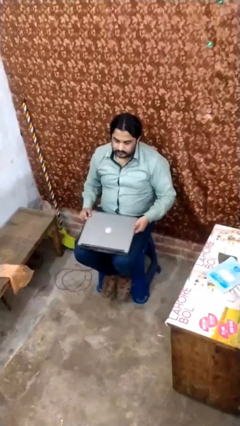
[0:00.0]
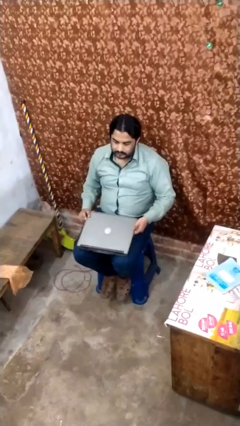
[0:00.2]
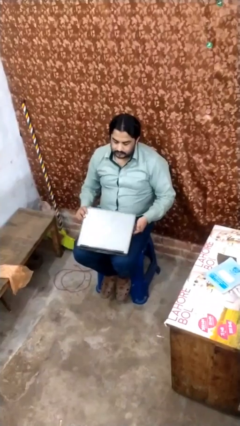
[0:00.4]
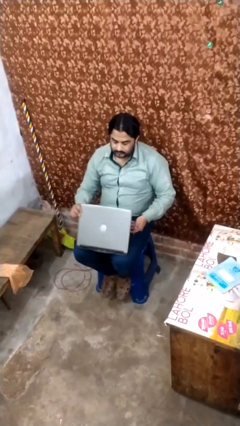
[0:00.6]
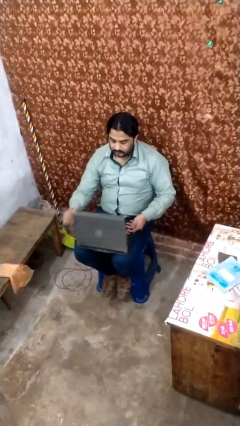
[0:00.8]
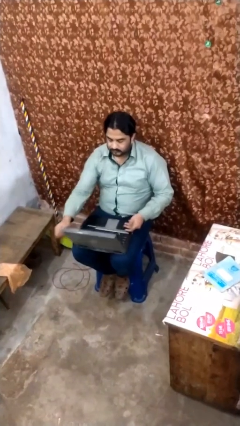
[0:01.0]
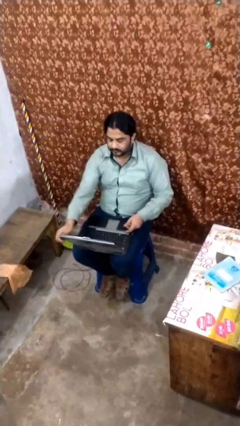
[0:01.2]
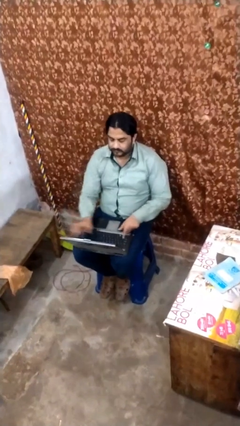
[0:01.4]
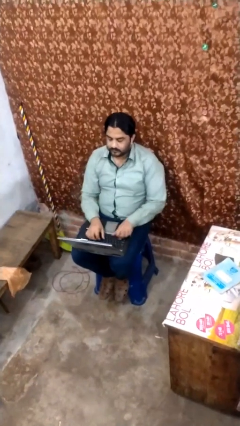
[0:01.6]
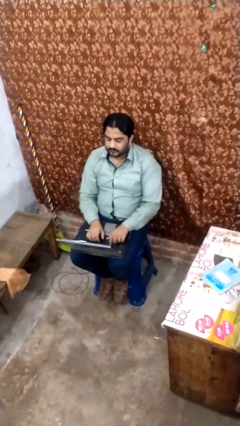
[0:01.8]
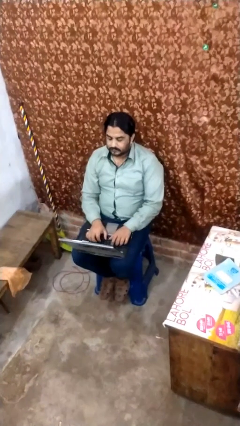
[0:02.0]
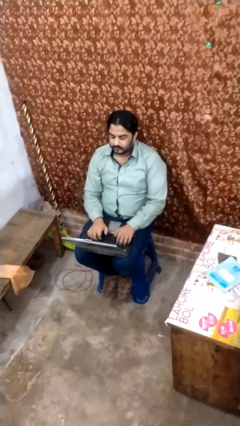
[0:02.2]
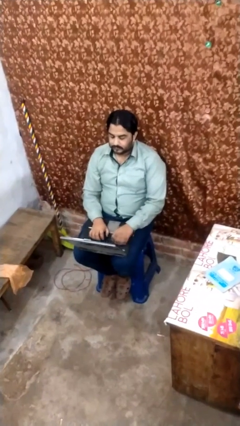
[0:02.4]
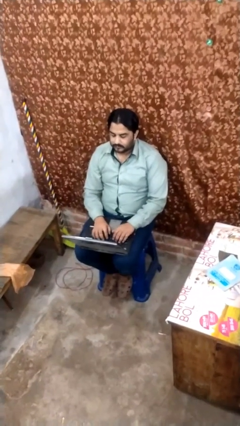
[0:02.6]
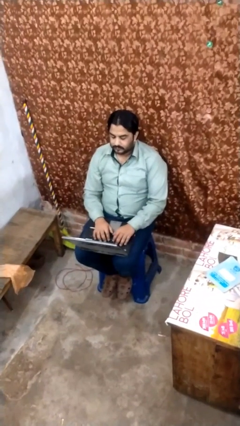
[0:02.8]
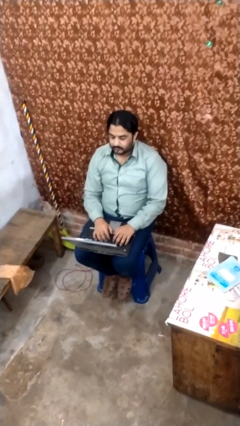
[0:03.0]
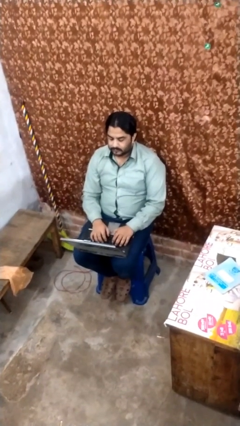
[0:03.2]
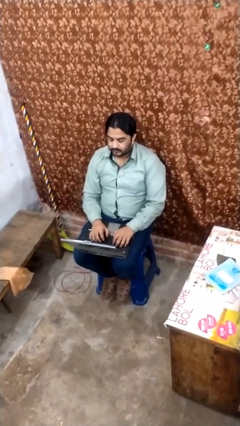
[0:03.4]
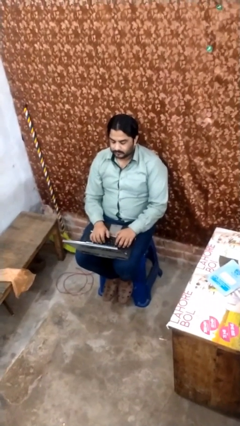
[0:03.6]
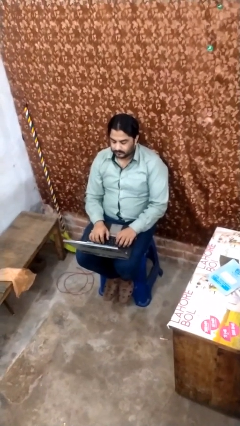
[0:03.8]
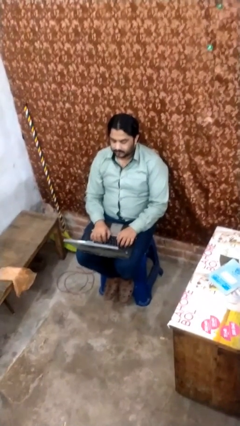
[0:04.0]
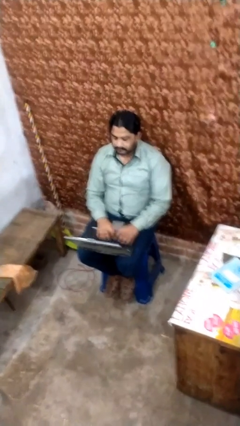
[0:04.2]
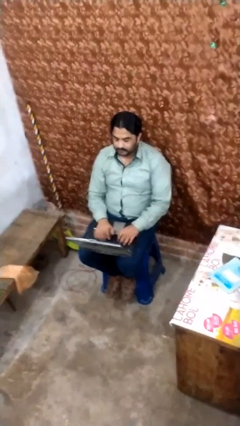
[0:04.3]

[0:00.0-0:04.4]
person interacts with laptop

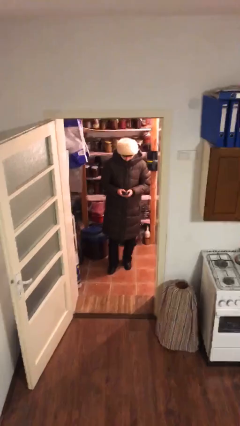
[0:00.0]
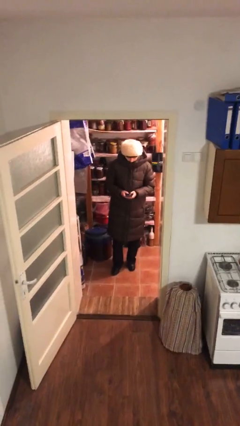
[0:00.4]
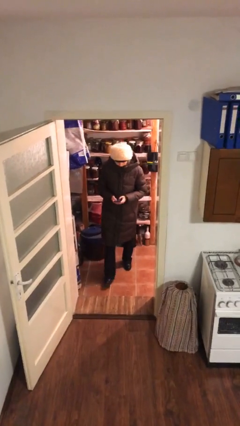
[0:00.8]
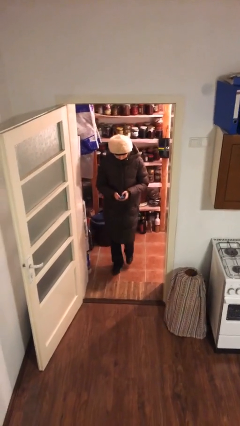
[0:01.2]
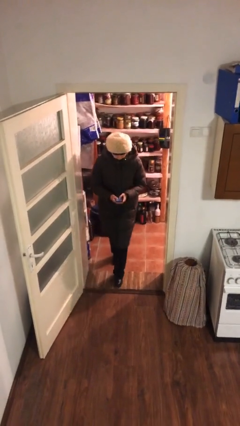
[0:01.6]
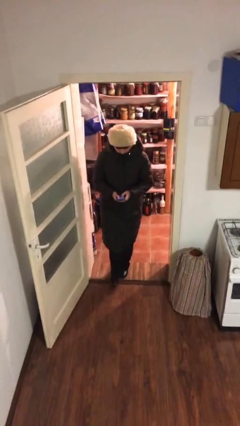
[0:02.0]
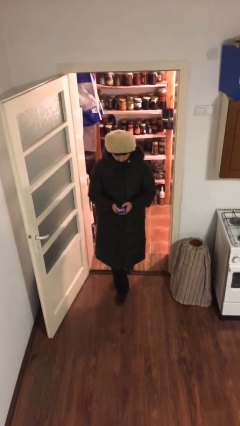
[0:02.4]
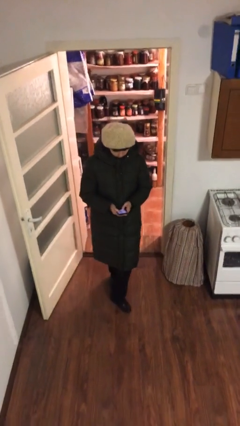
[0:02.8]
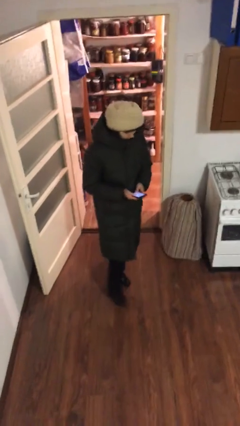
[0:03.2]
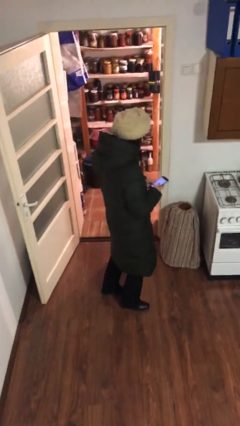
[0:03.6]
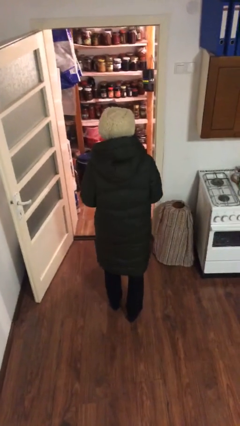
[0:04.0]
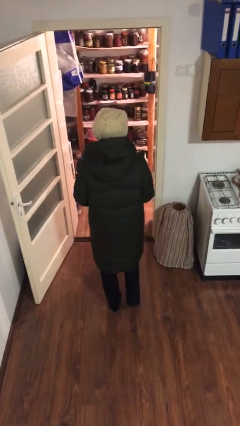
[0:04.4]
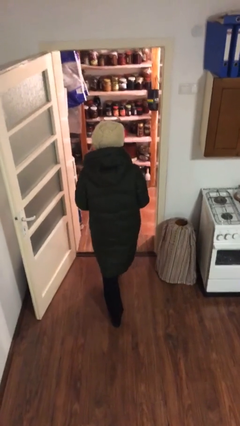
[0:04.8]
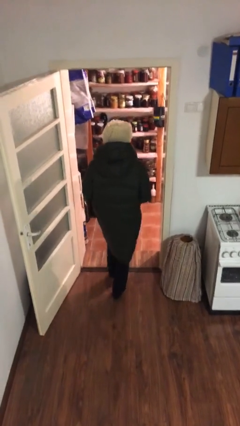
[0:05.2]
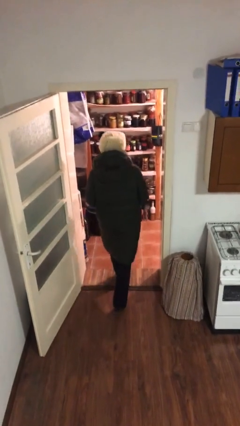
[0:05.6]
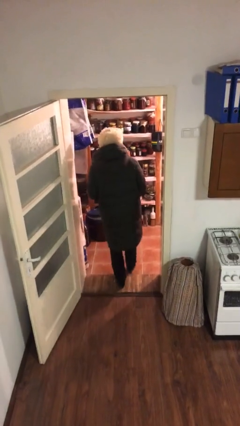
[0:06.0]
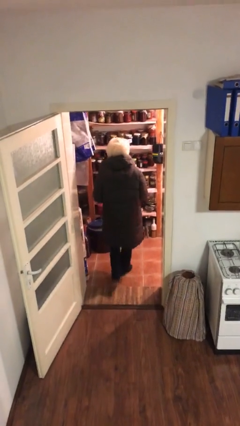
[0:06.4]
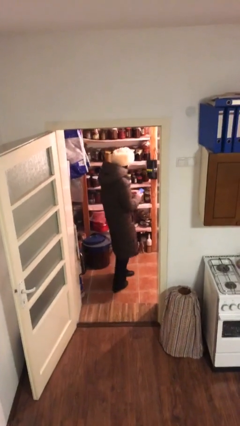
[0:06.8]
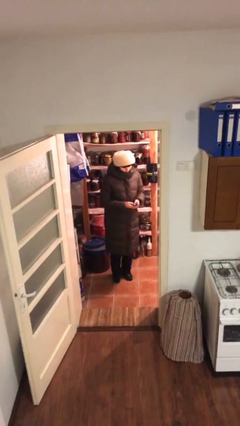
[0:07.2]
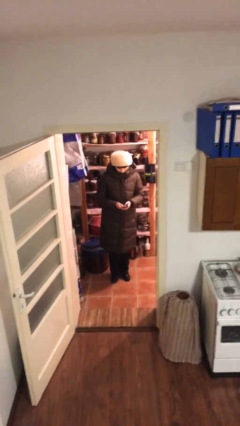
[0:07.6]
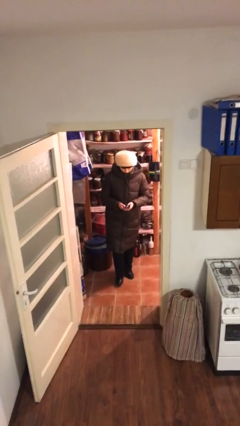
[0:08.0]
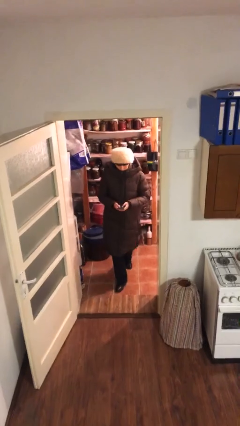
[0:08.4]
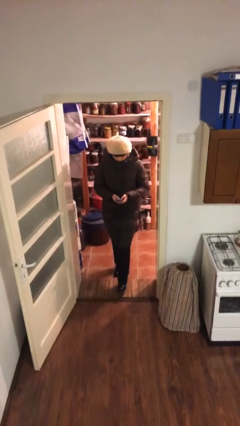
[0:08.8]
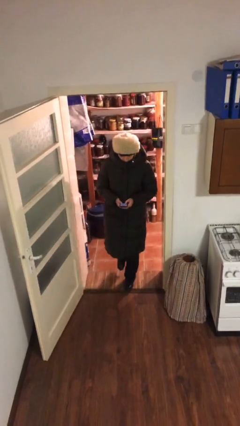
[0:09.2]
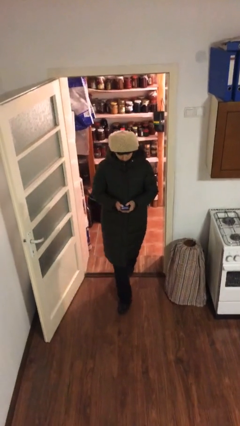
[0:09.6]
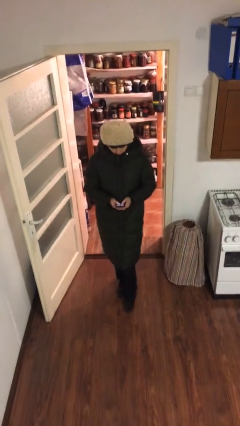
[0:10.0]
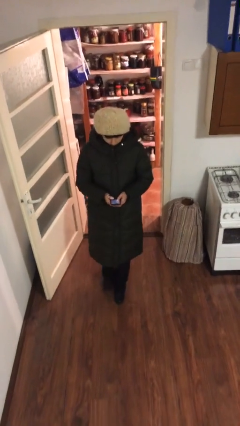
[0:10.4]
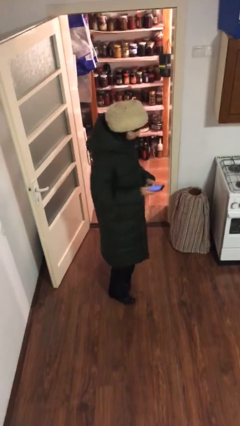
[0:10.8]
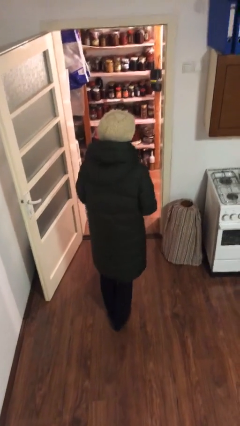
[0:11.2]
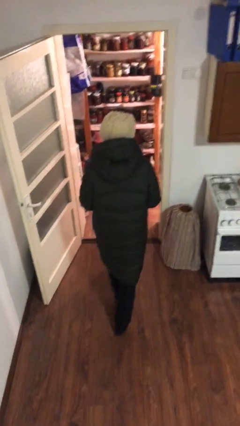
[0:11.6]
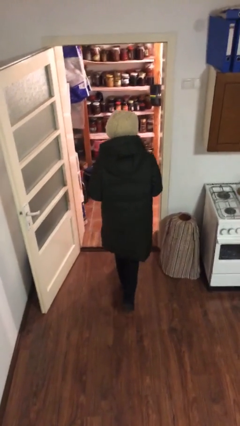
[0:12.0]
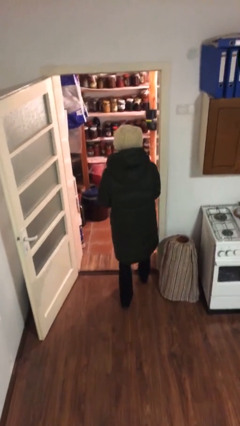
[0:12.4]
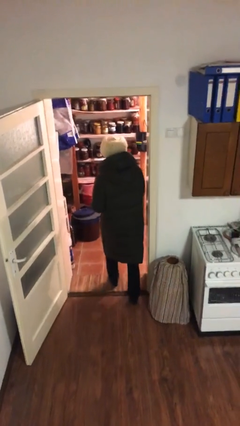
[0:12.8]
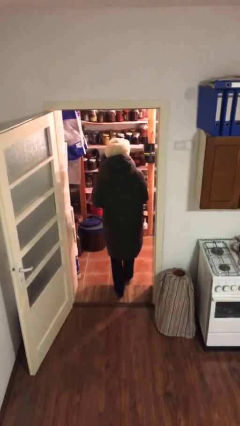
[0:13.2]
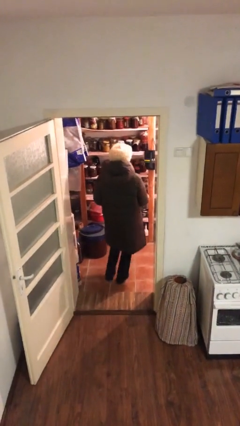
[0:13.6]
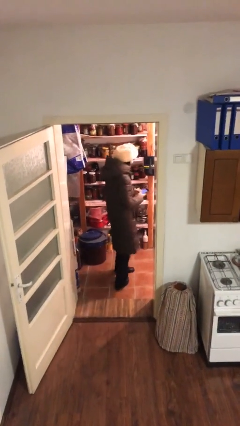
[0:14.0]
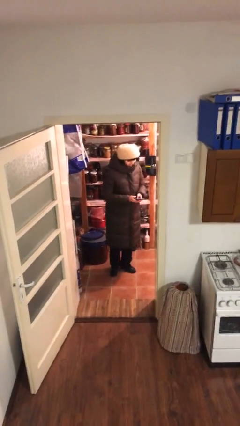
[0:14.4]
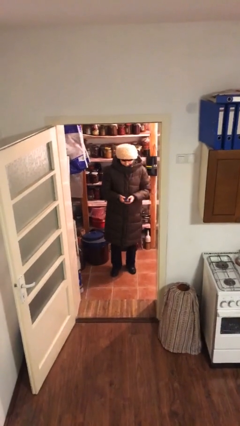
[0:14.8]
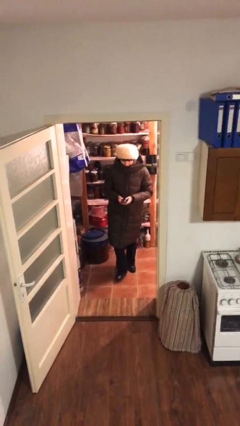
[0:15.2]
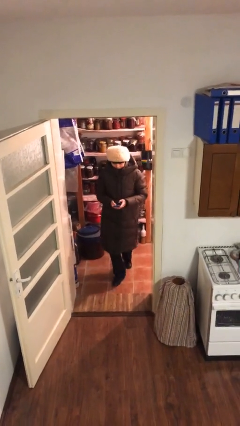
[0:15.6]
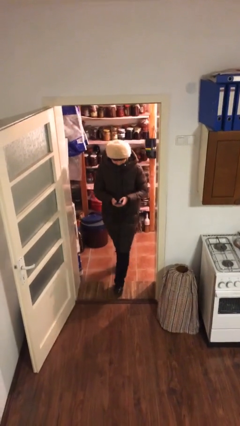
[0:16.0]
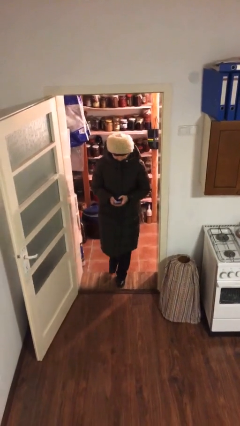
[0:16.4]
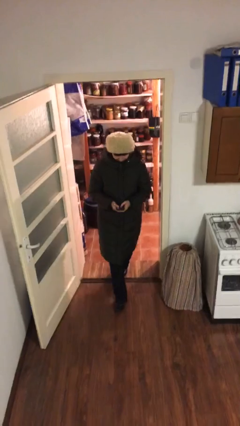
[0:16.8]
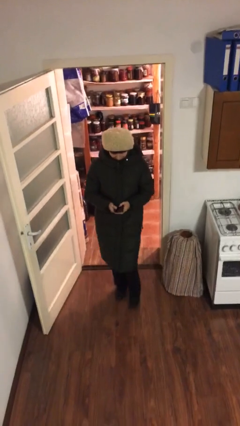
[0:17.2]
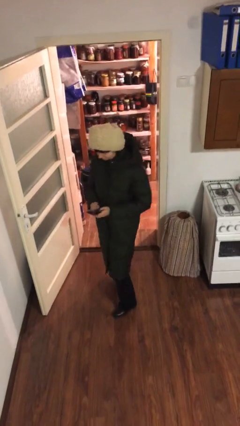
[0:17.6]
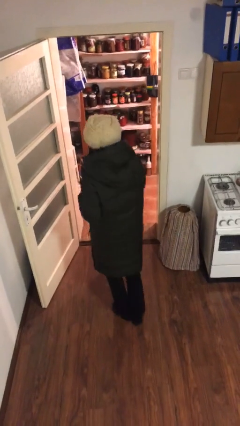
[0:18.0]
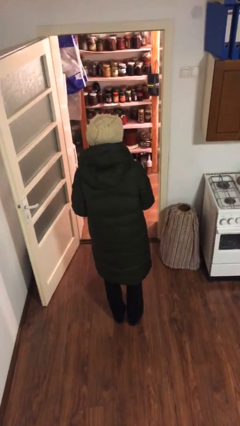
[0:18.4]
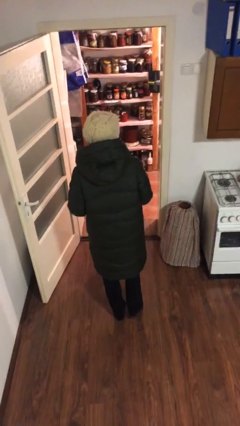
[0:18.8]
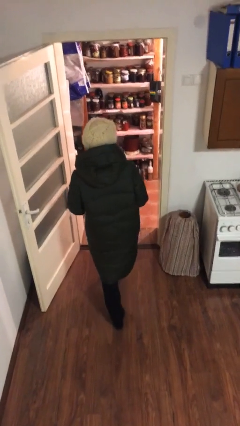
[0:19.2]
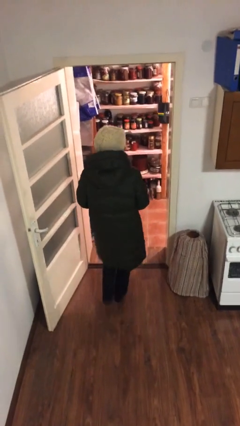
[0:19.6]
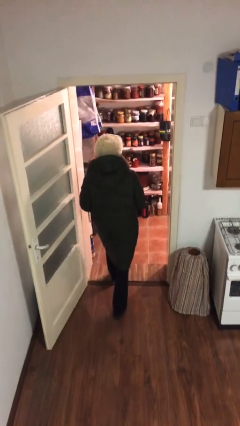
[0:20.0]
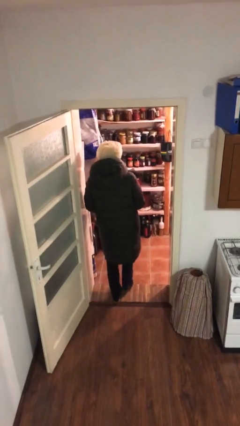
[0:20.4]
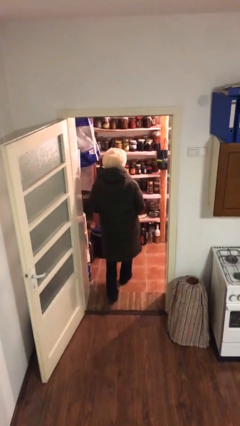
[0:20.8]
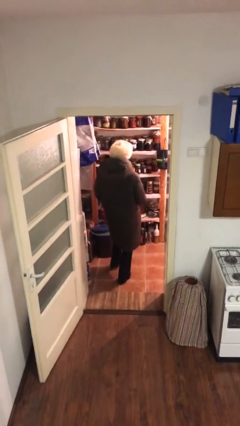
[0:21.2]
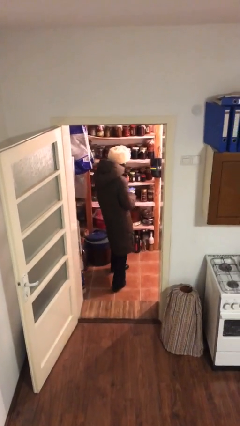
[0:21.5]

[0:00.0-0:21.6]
person texts on phone

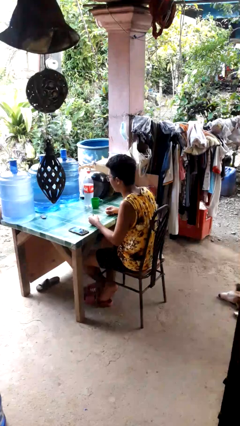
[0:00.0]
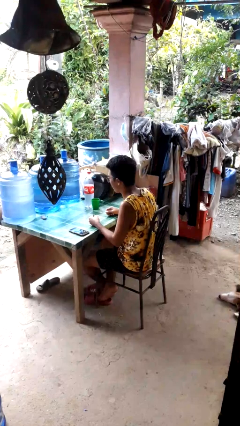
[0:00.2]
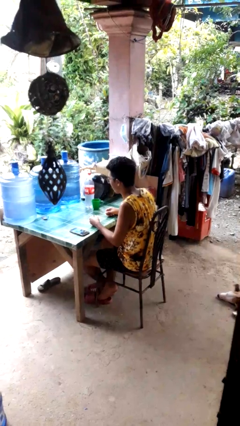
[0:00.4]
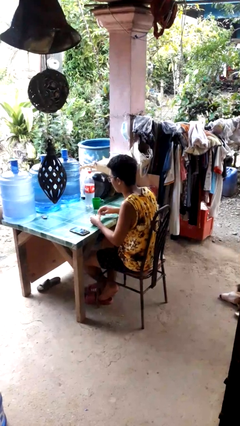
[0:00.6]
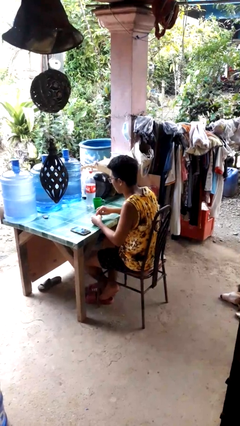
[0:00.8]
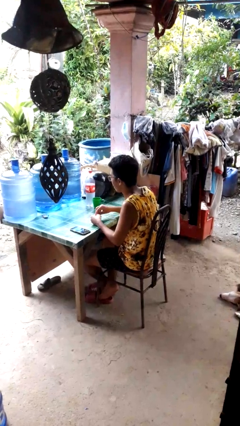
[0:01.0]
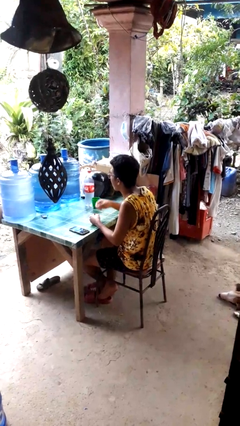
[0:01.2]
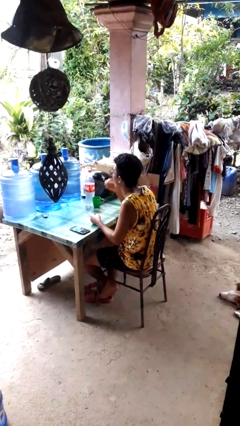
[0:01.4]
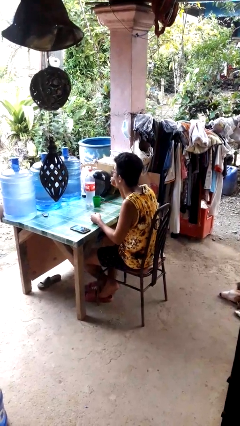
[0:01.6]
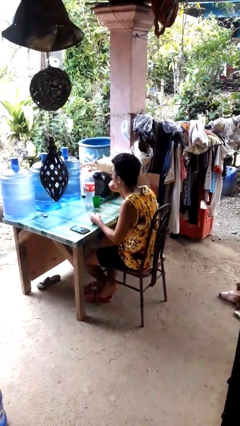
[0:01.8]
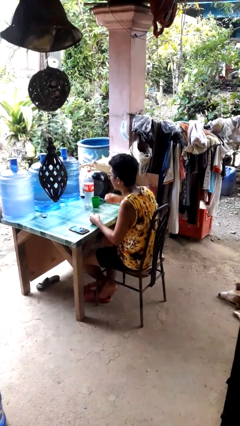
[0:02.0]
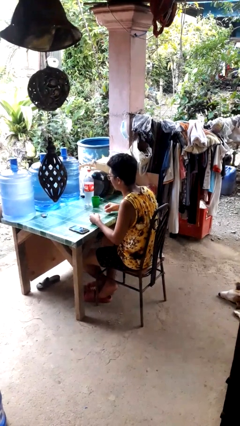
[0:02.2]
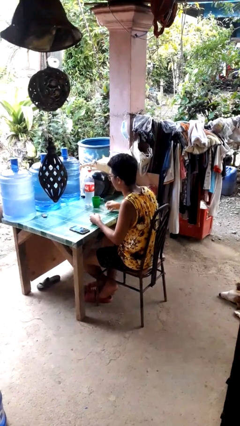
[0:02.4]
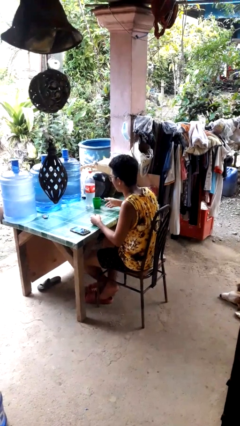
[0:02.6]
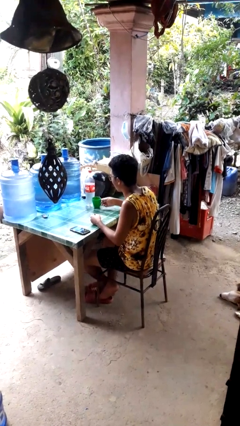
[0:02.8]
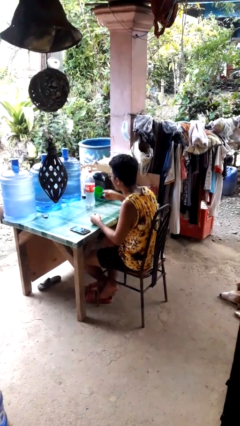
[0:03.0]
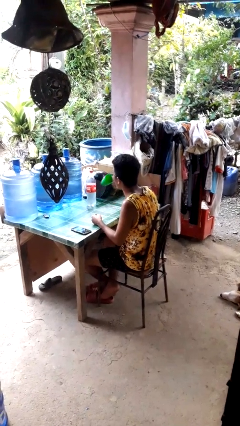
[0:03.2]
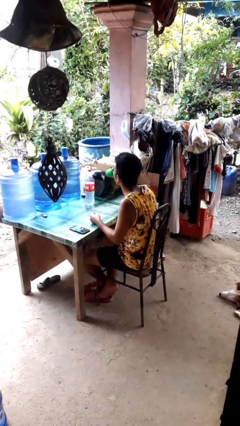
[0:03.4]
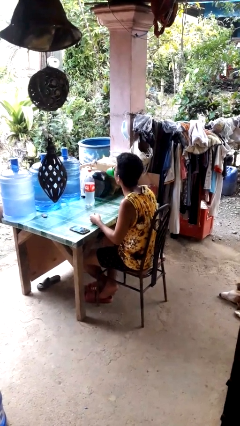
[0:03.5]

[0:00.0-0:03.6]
person takes medicine pills
